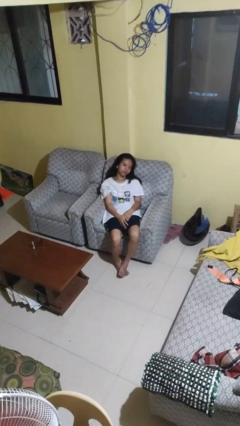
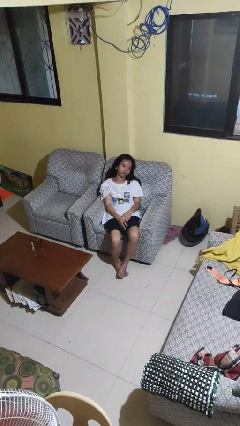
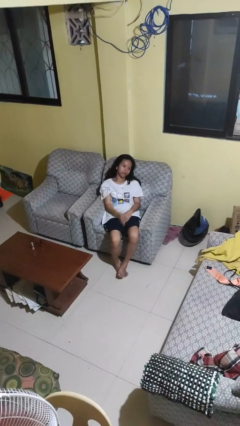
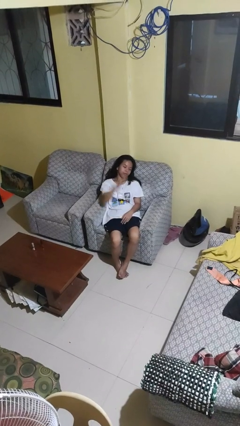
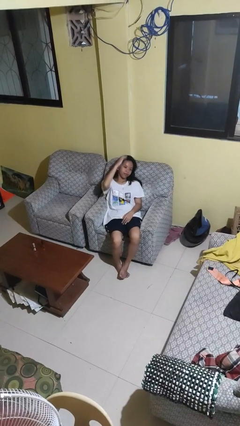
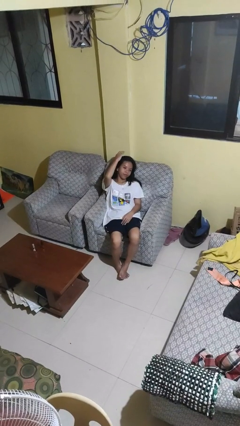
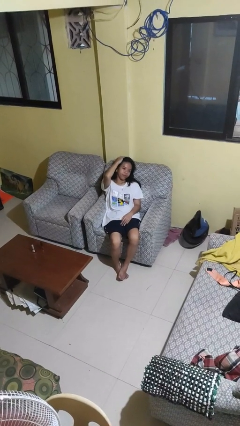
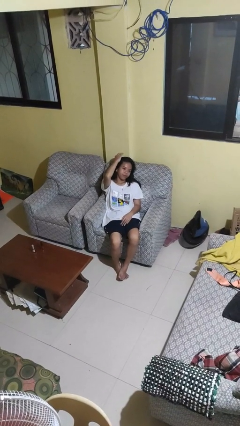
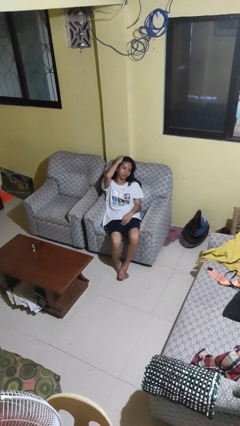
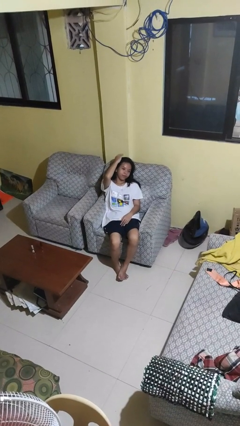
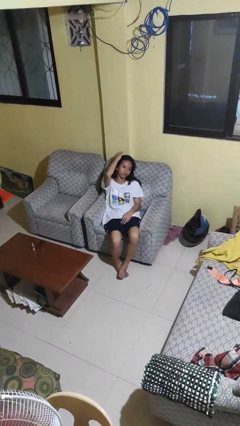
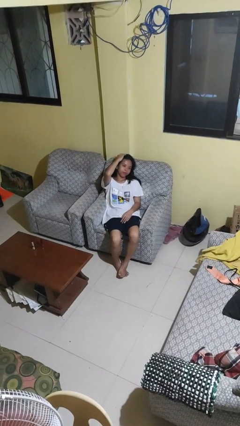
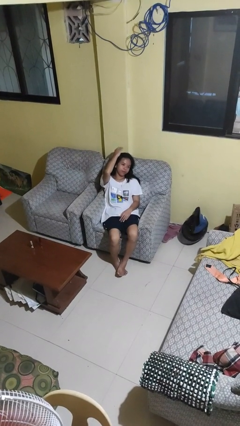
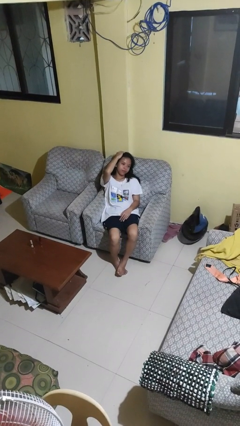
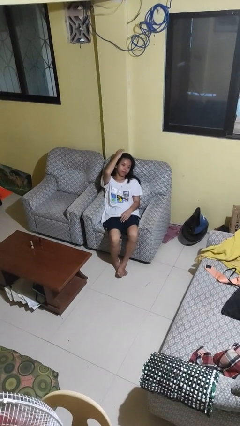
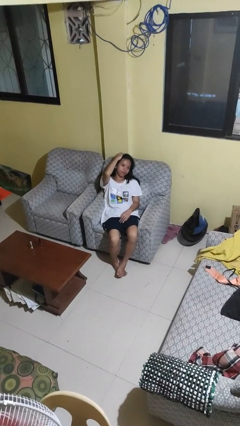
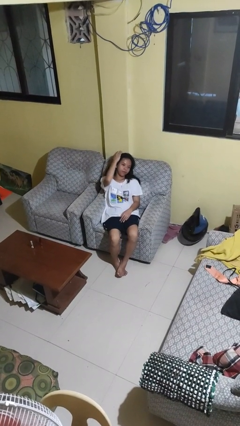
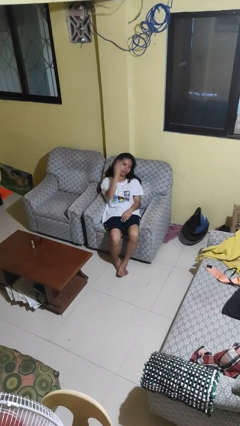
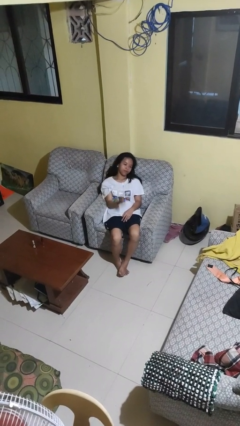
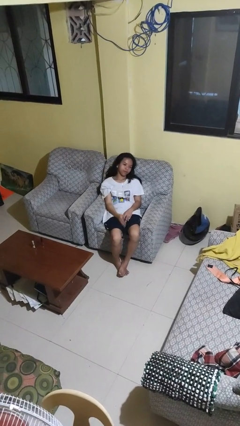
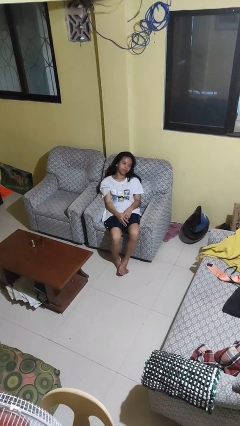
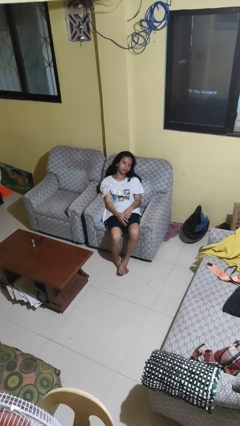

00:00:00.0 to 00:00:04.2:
person pats head

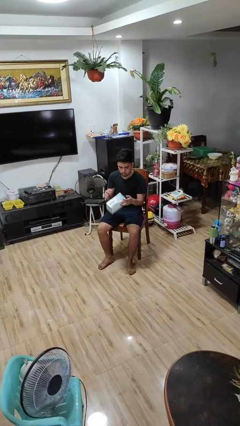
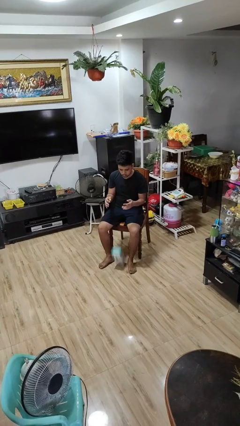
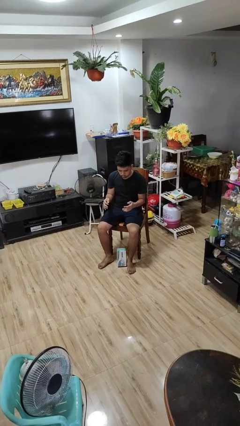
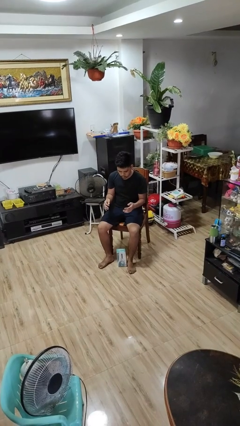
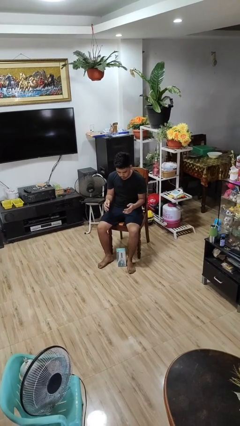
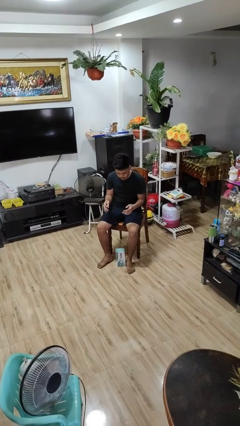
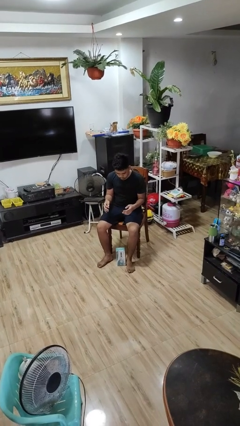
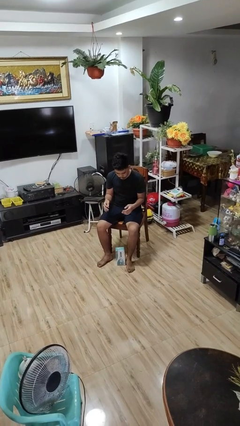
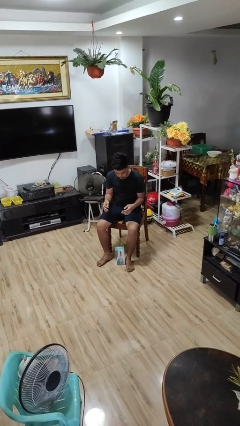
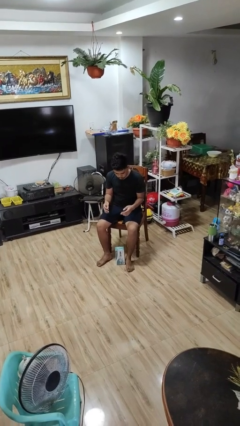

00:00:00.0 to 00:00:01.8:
person drops object

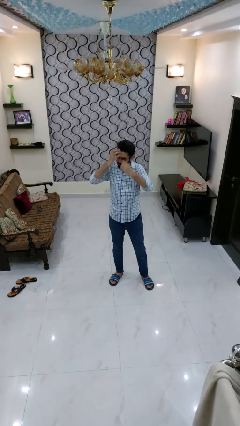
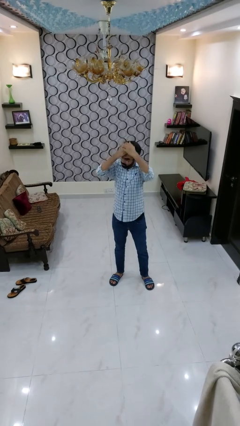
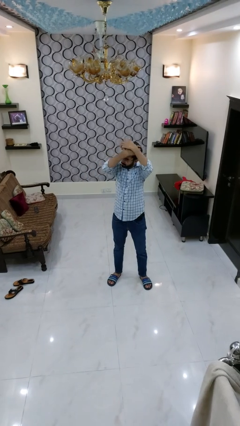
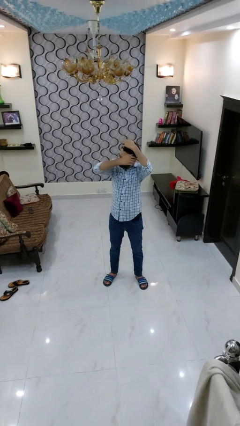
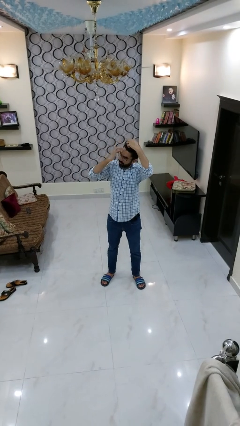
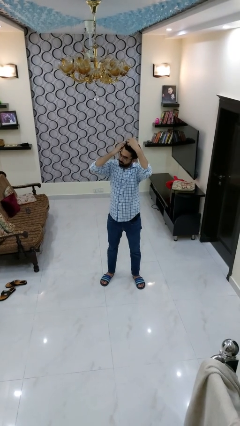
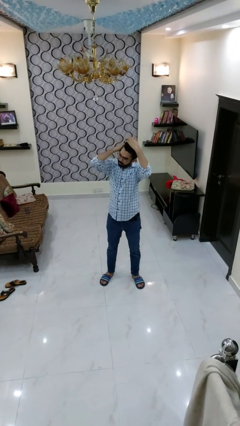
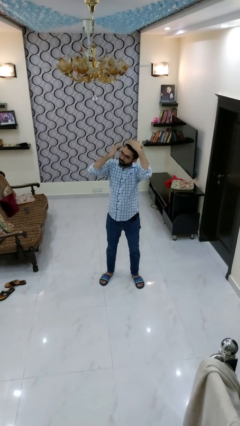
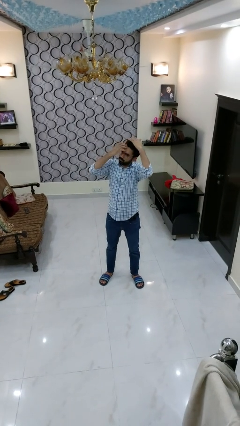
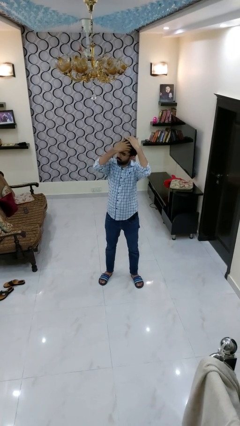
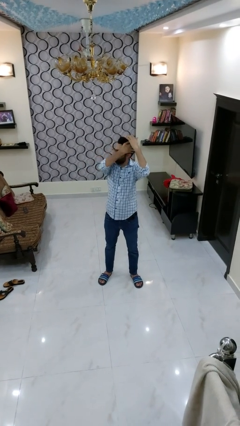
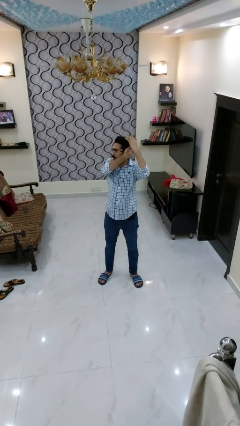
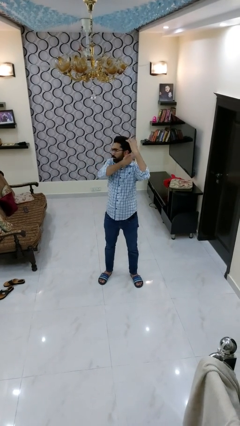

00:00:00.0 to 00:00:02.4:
person strokes hair

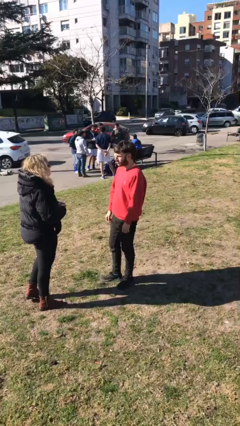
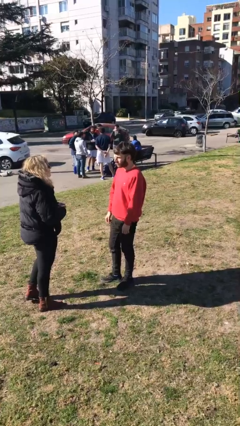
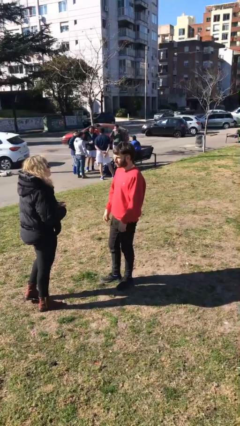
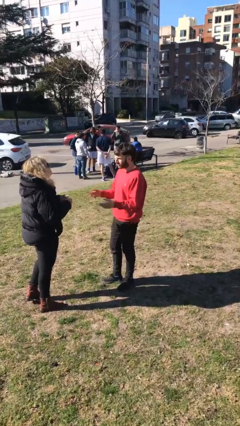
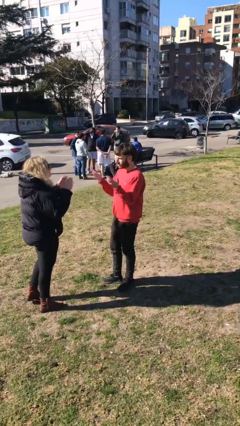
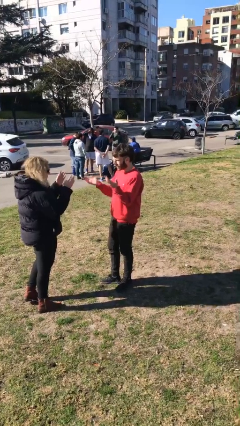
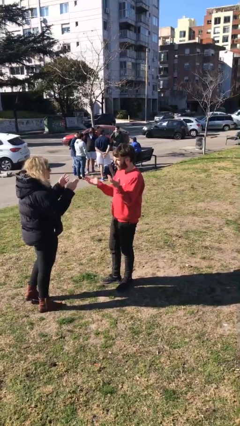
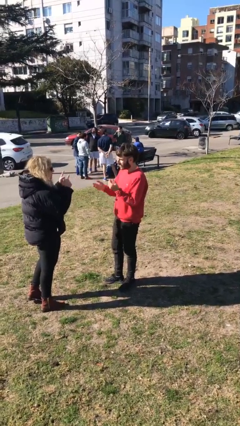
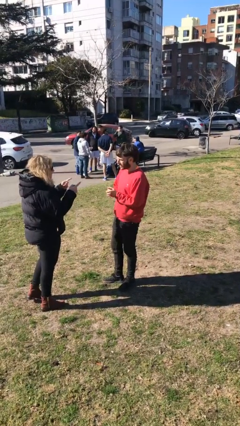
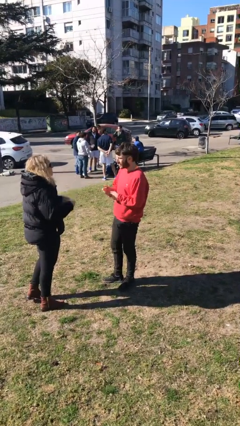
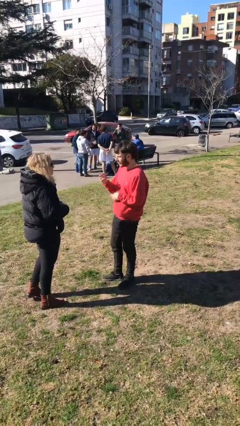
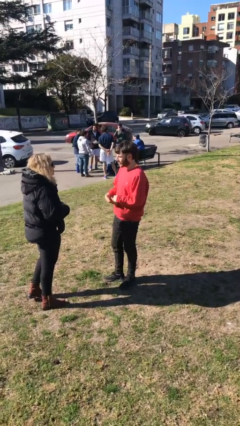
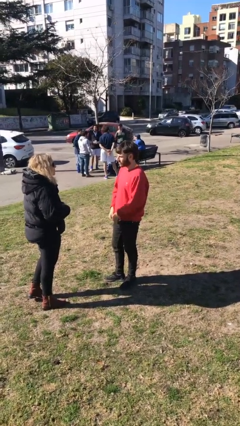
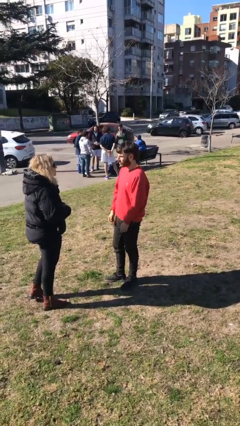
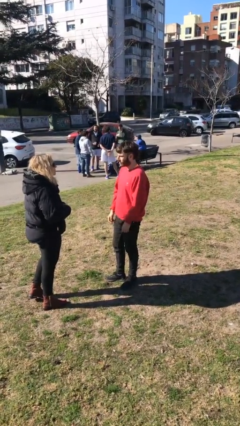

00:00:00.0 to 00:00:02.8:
person talks to person

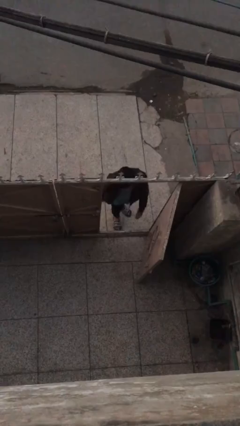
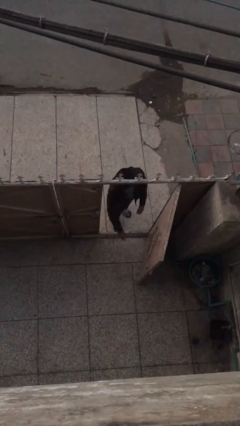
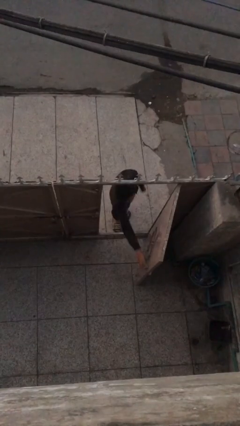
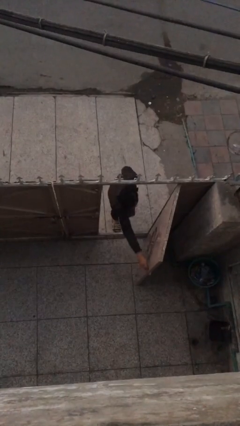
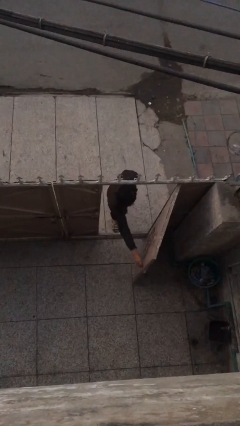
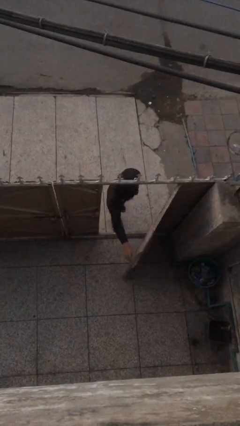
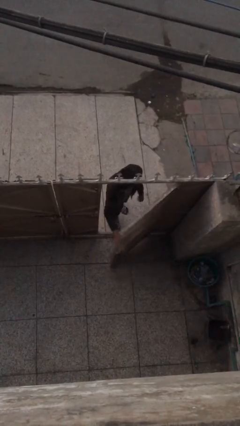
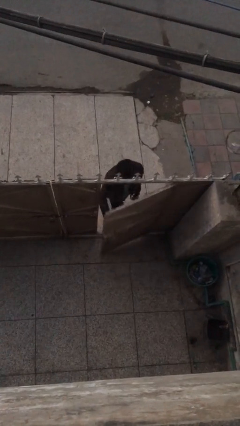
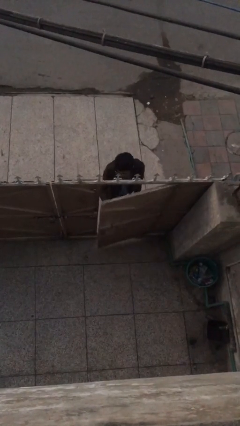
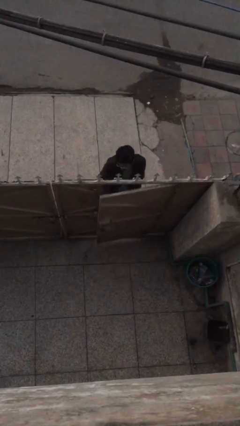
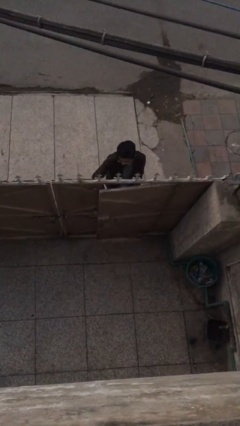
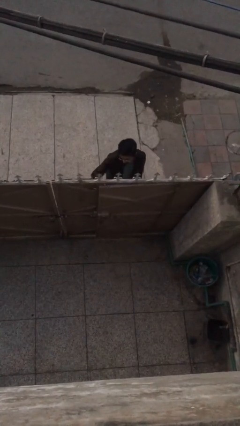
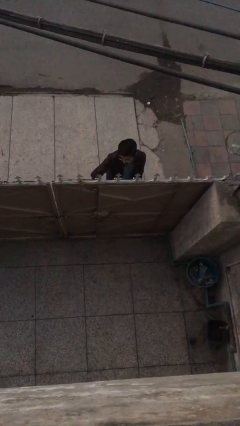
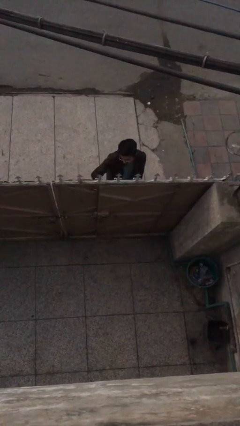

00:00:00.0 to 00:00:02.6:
person closes facility door

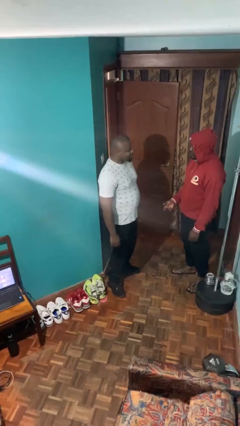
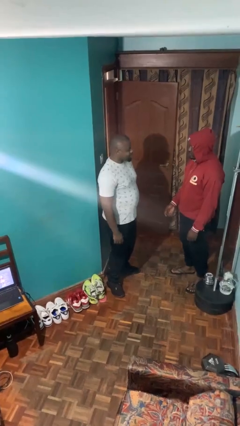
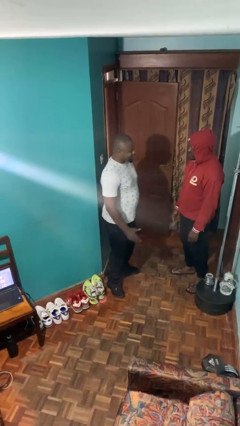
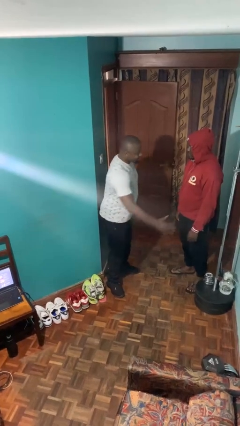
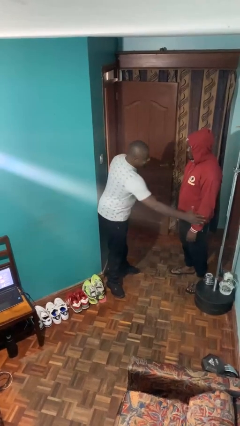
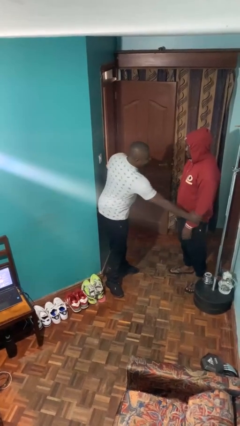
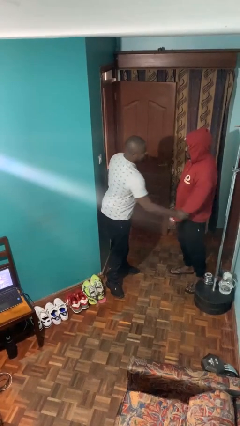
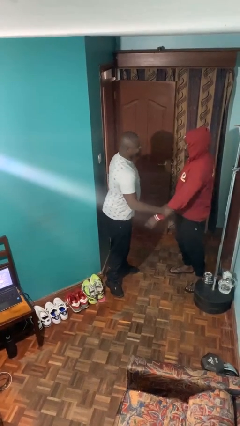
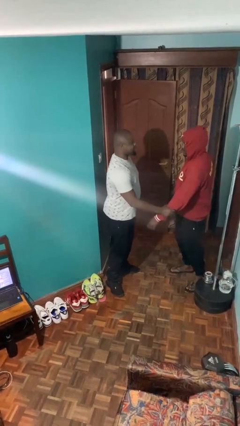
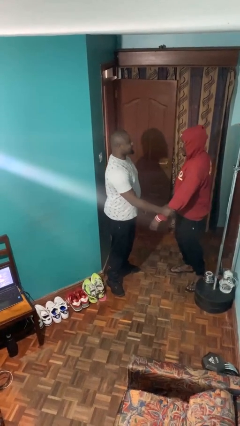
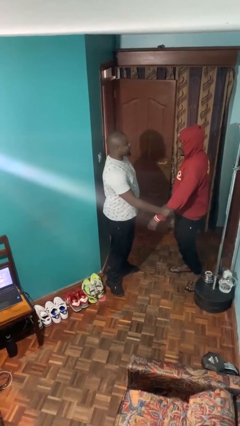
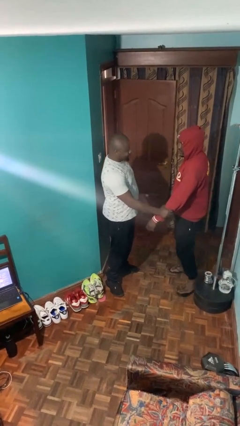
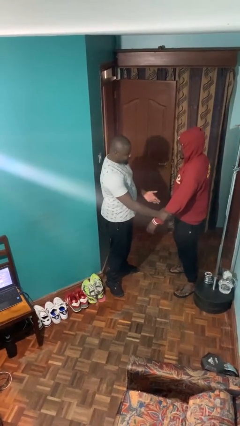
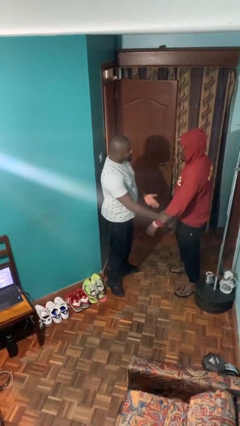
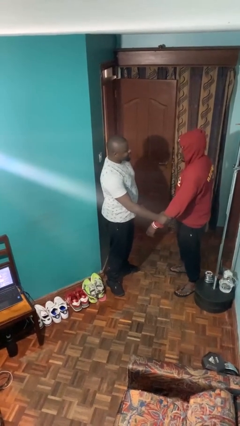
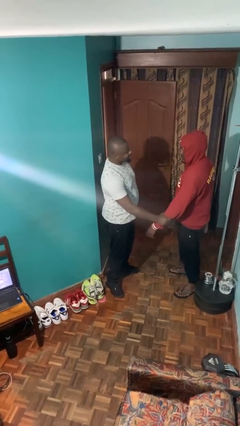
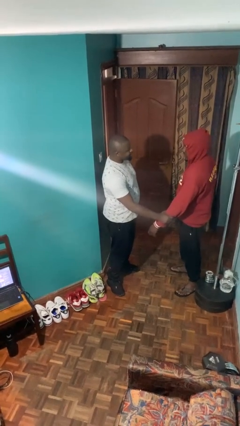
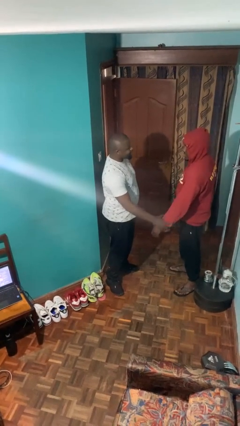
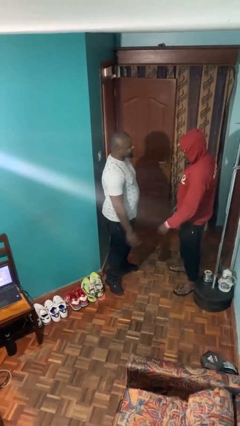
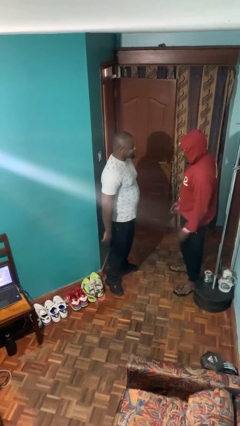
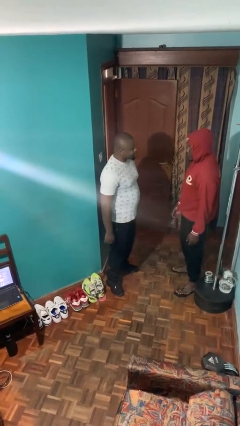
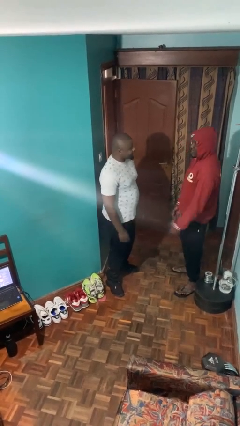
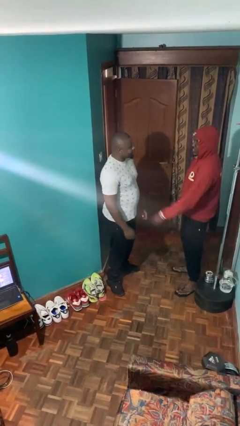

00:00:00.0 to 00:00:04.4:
person grabs person by forearm
